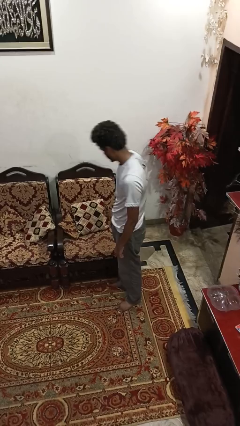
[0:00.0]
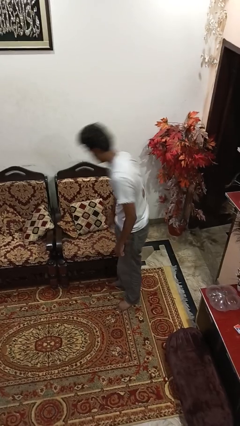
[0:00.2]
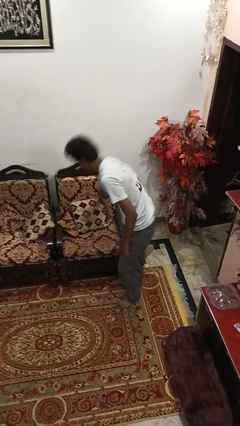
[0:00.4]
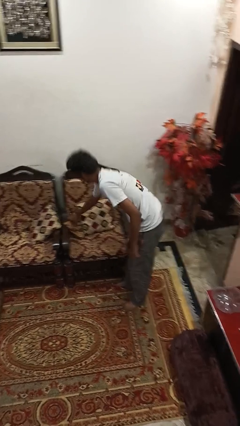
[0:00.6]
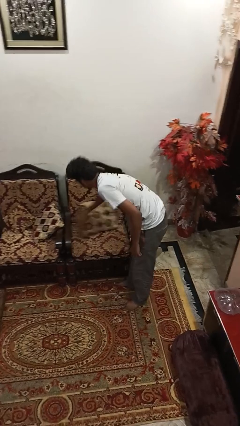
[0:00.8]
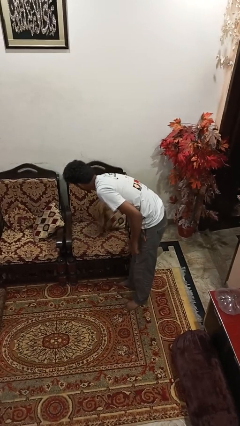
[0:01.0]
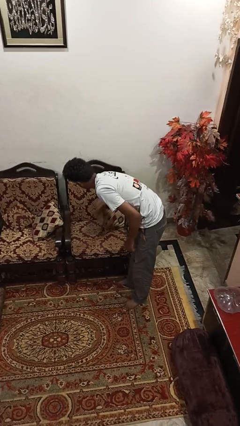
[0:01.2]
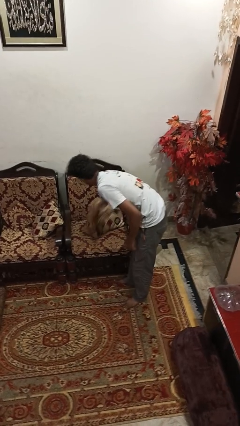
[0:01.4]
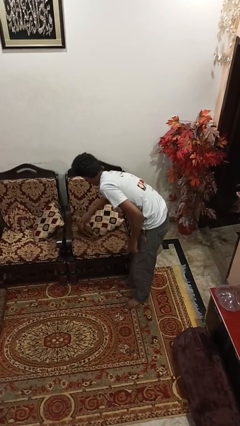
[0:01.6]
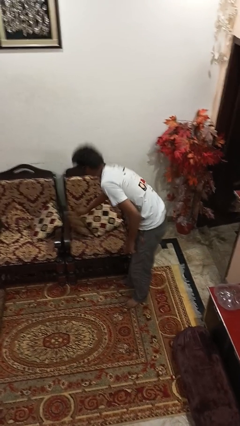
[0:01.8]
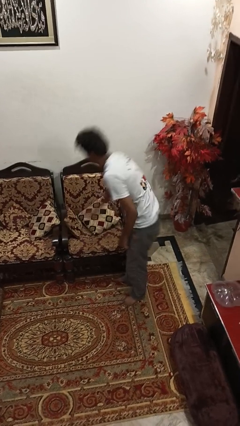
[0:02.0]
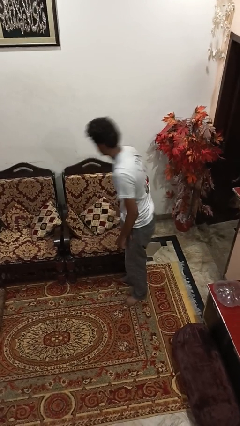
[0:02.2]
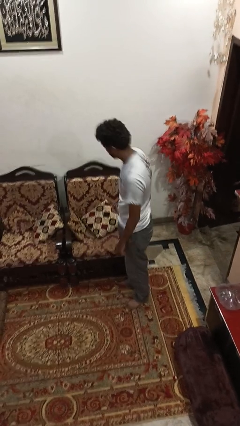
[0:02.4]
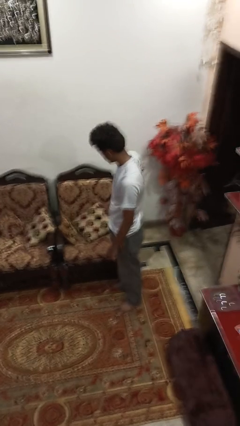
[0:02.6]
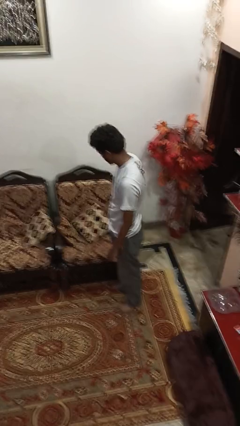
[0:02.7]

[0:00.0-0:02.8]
person searches in couch

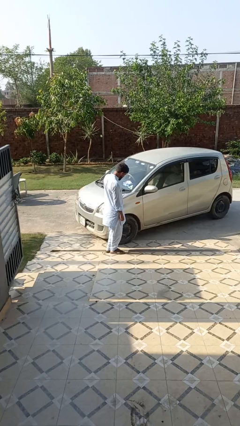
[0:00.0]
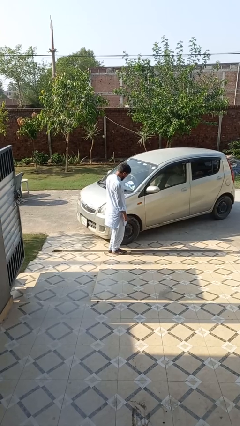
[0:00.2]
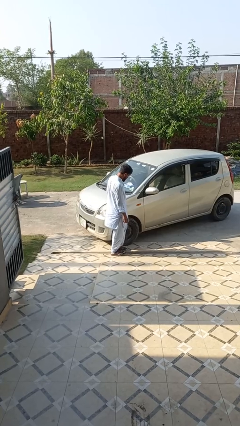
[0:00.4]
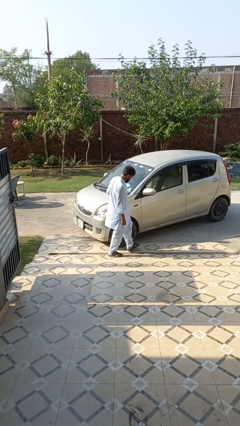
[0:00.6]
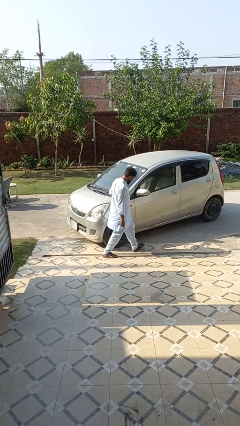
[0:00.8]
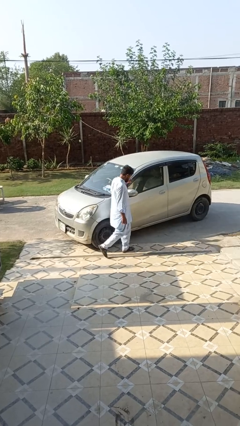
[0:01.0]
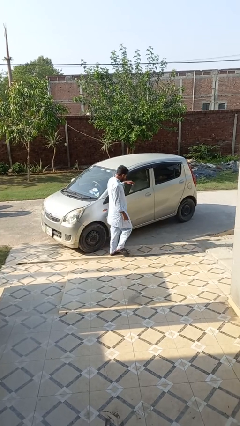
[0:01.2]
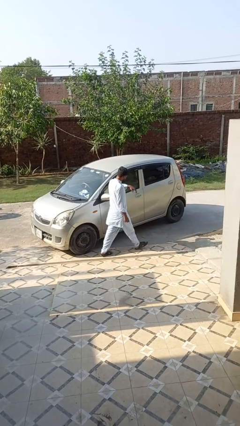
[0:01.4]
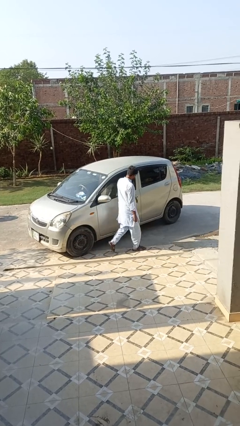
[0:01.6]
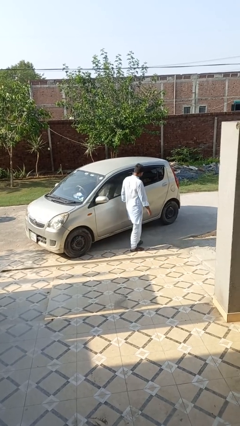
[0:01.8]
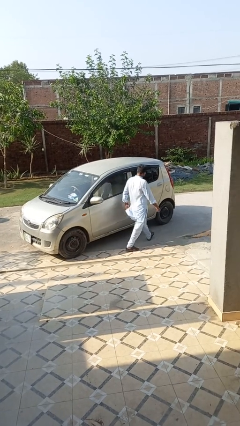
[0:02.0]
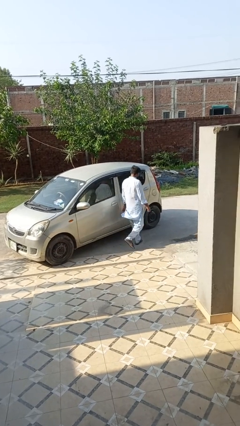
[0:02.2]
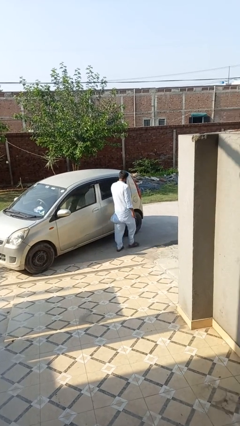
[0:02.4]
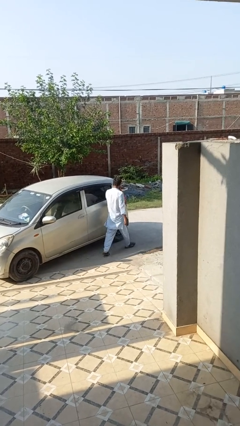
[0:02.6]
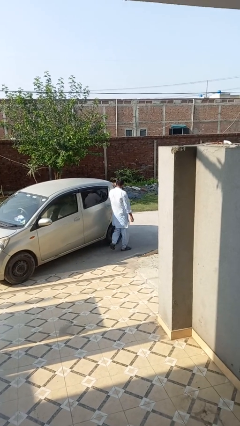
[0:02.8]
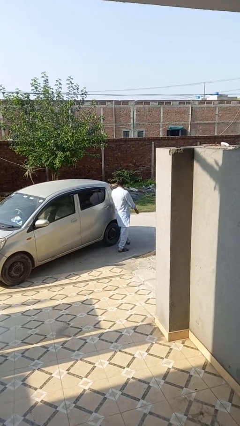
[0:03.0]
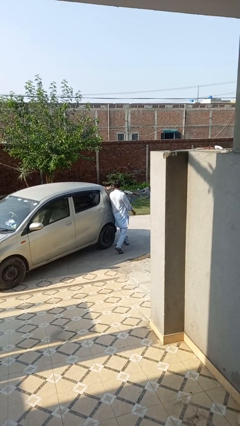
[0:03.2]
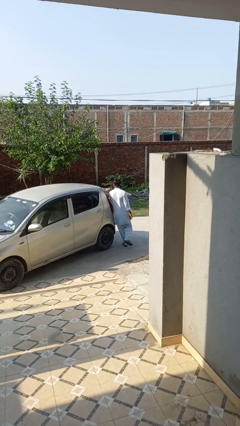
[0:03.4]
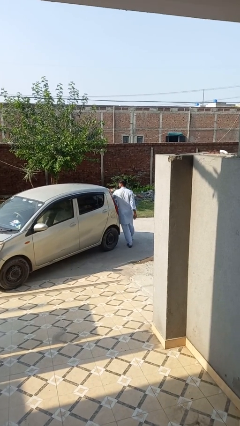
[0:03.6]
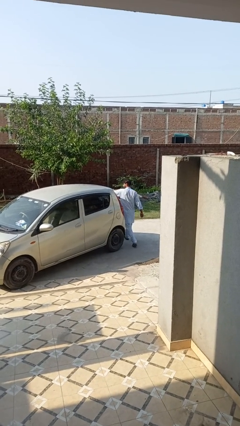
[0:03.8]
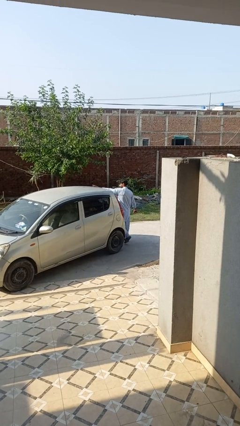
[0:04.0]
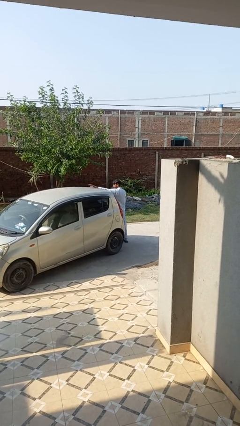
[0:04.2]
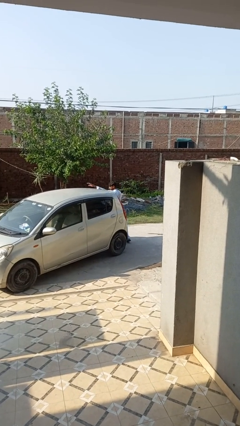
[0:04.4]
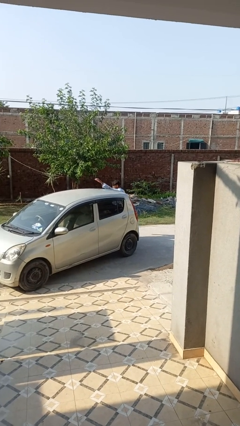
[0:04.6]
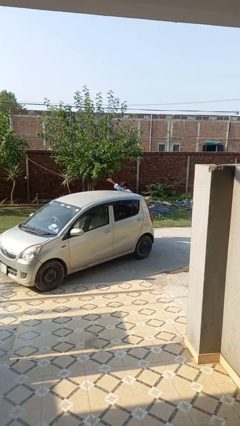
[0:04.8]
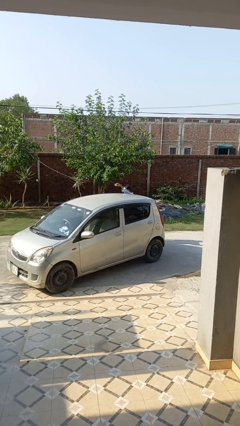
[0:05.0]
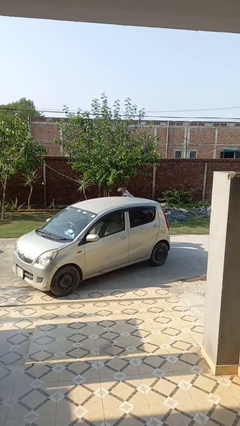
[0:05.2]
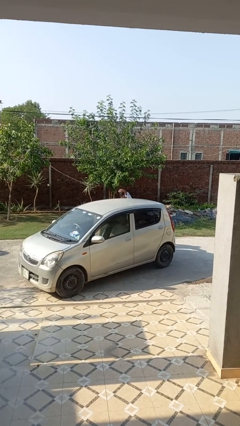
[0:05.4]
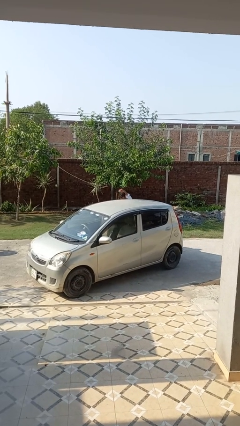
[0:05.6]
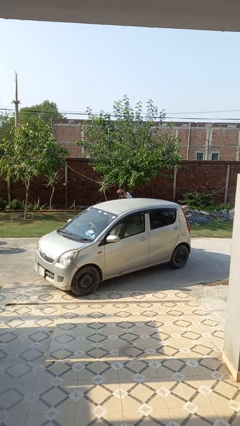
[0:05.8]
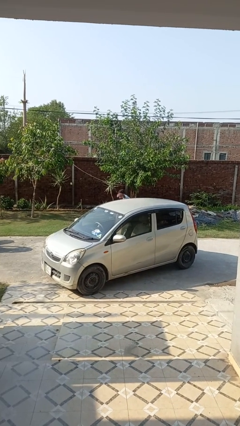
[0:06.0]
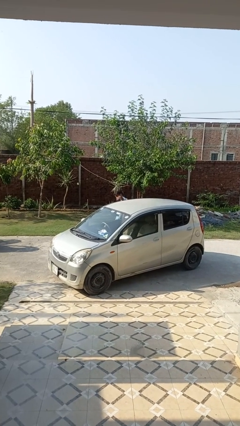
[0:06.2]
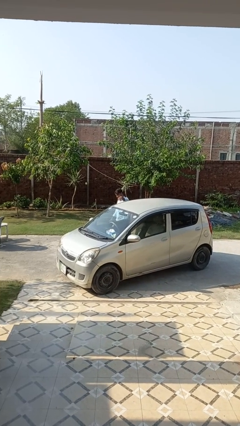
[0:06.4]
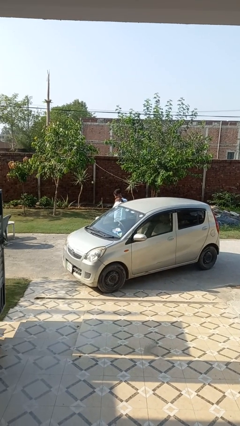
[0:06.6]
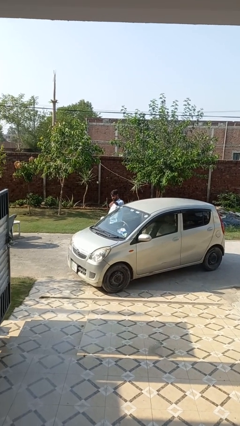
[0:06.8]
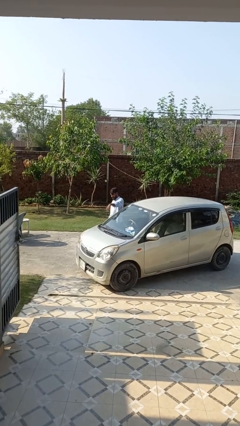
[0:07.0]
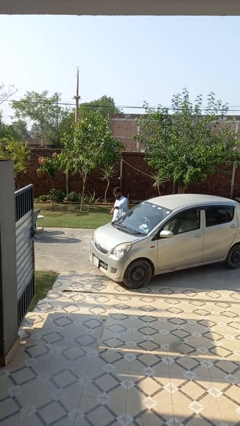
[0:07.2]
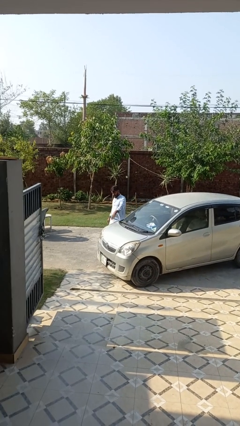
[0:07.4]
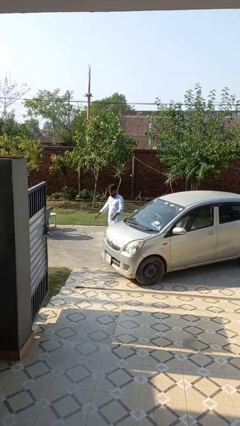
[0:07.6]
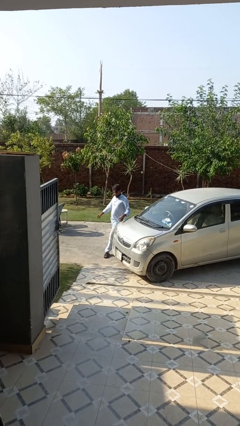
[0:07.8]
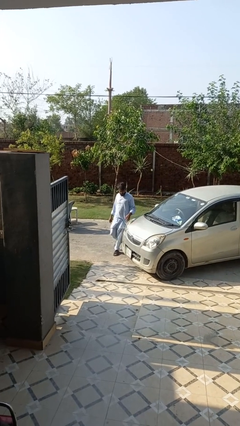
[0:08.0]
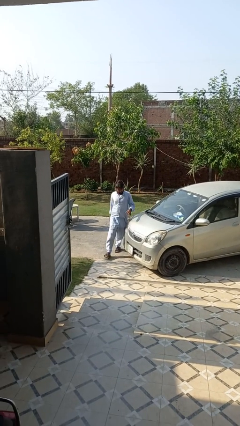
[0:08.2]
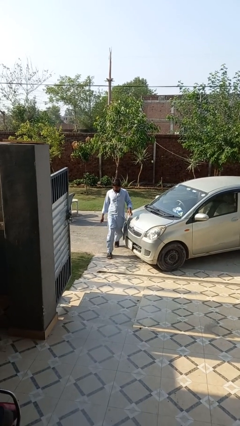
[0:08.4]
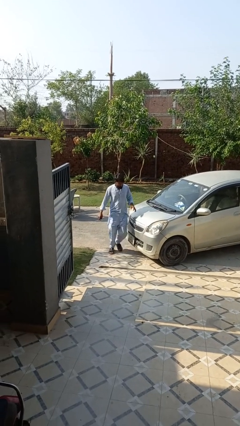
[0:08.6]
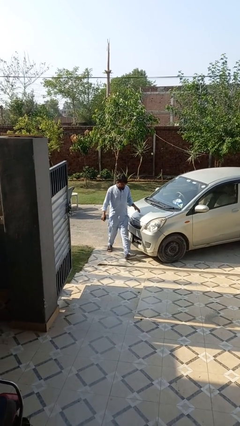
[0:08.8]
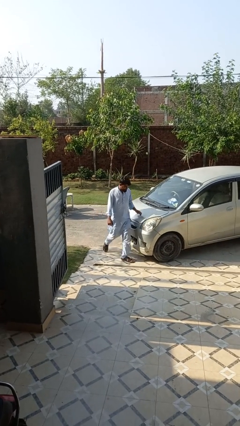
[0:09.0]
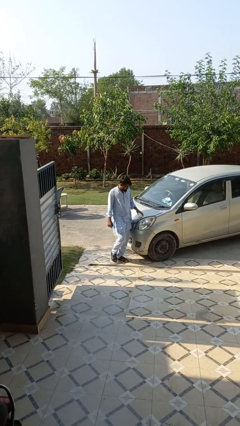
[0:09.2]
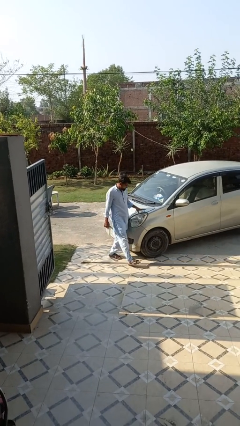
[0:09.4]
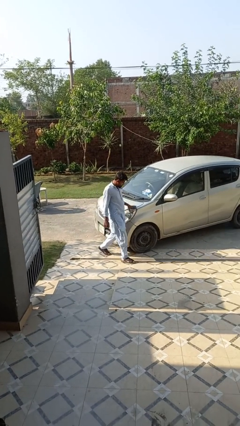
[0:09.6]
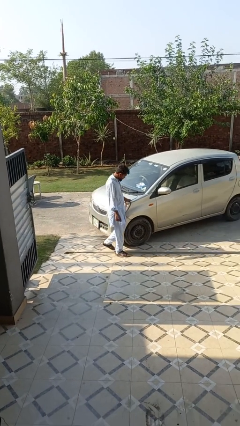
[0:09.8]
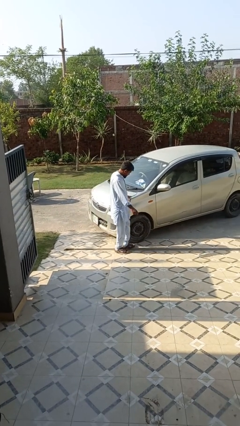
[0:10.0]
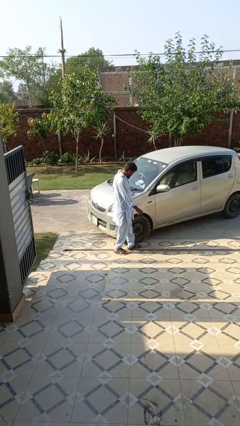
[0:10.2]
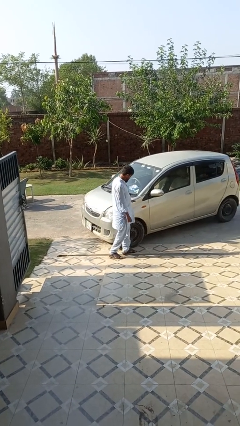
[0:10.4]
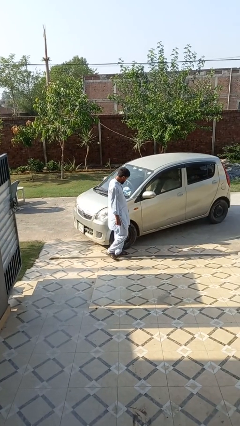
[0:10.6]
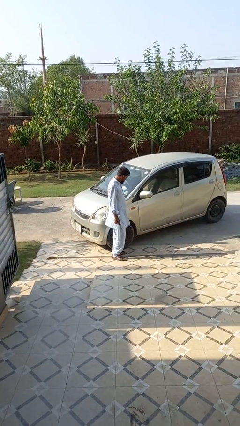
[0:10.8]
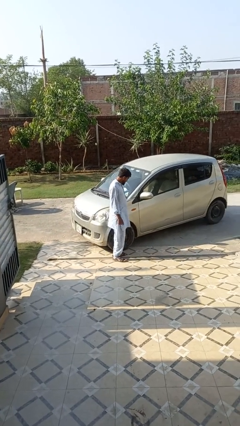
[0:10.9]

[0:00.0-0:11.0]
person walks around car

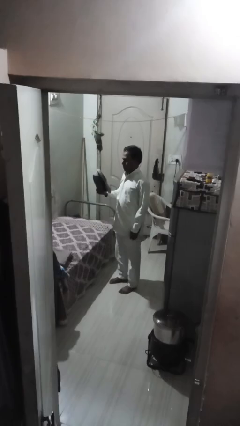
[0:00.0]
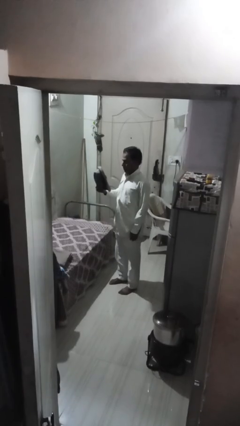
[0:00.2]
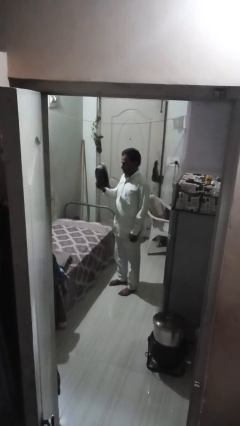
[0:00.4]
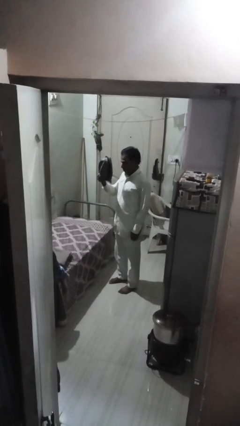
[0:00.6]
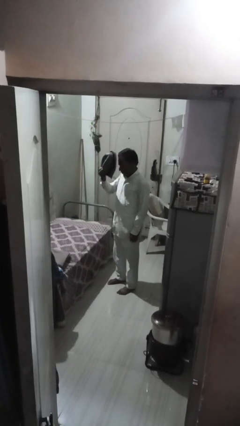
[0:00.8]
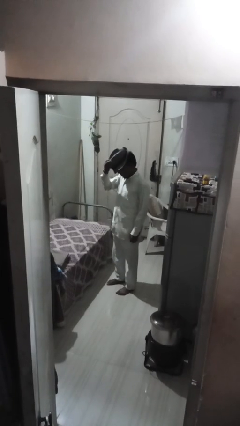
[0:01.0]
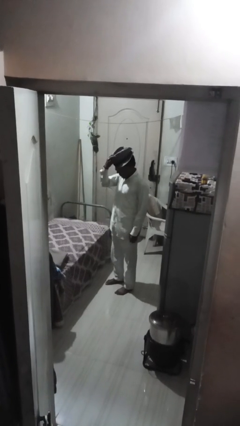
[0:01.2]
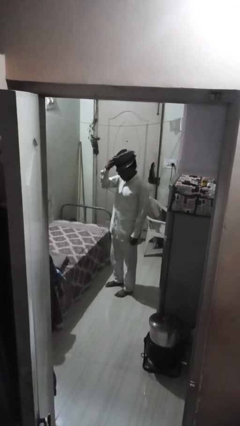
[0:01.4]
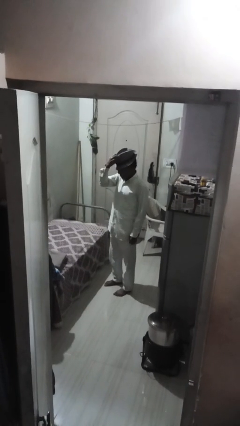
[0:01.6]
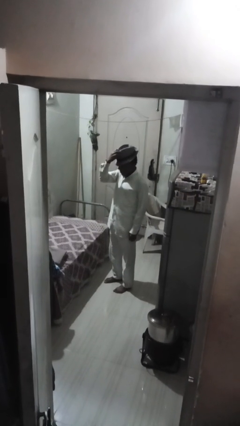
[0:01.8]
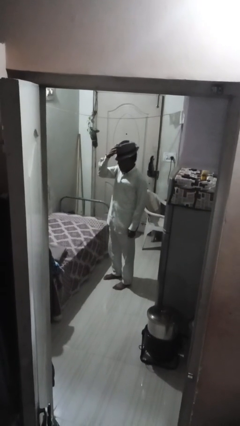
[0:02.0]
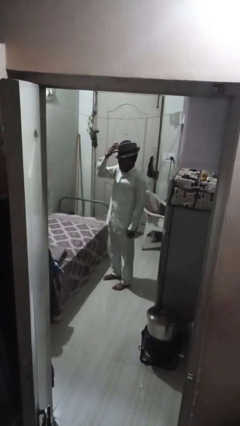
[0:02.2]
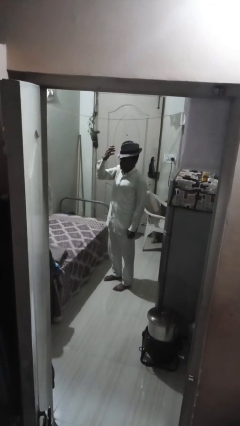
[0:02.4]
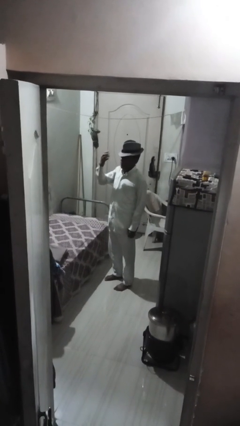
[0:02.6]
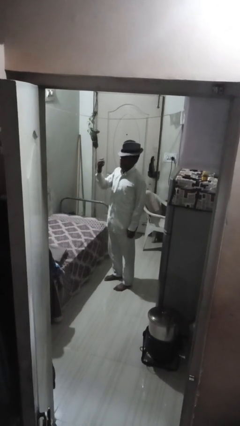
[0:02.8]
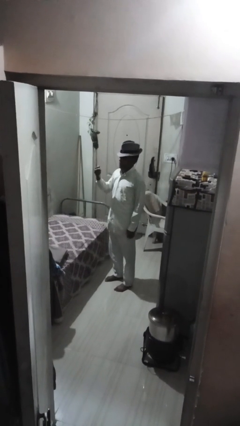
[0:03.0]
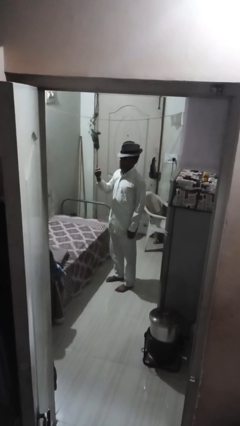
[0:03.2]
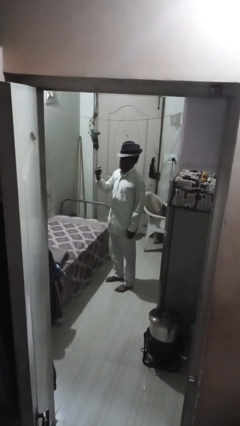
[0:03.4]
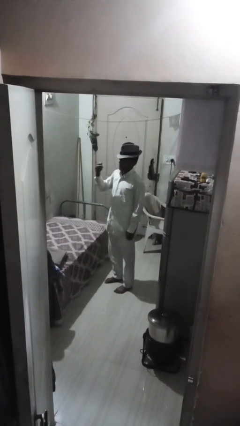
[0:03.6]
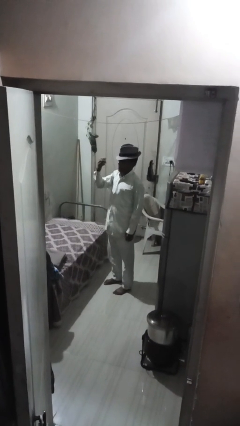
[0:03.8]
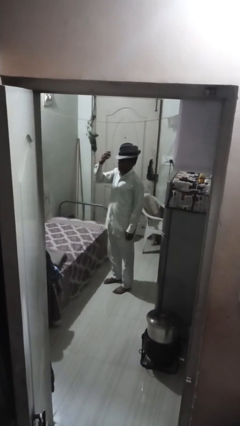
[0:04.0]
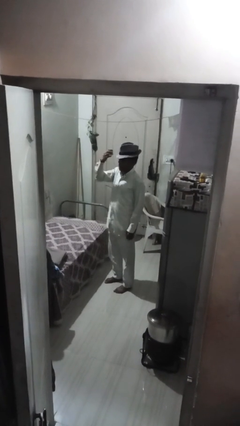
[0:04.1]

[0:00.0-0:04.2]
person puts on hat
